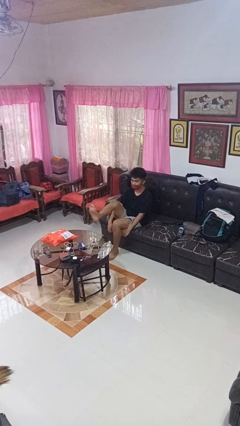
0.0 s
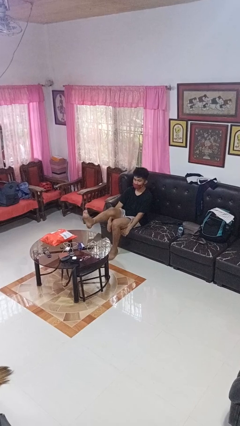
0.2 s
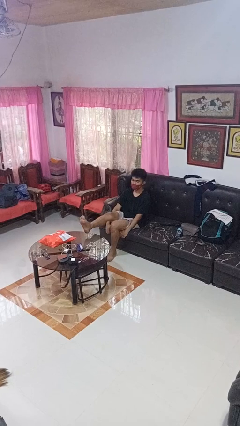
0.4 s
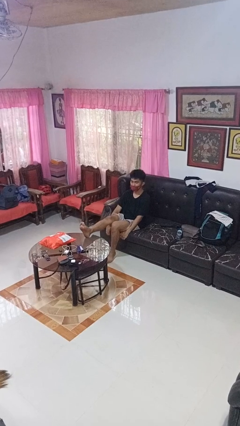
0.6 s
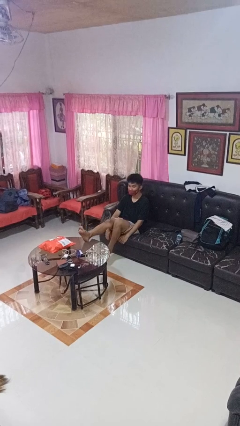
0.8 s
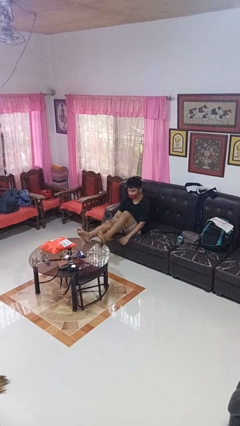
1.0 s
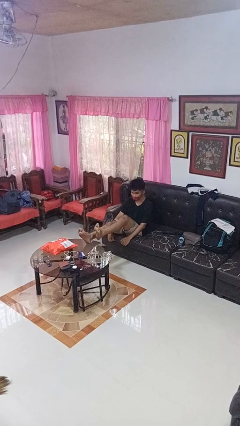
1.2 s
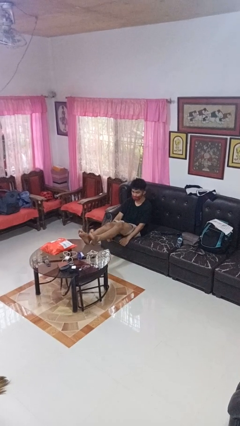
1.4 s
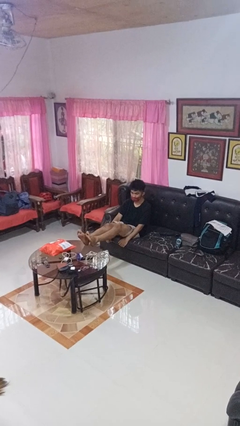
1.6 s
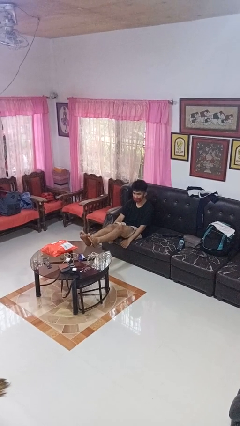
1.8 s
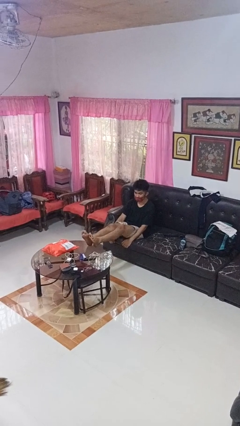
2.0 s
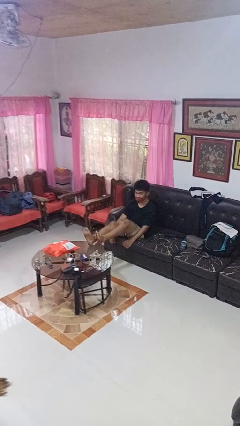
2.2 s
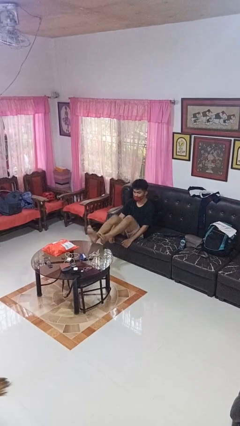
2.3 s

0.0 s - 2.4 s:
person puts feet up

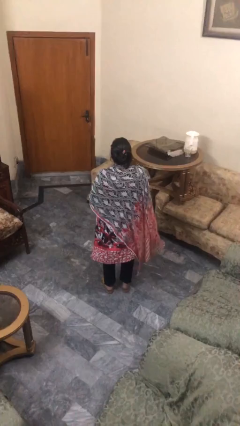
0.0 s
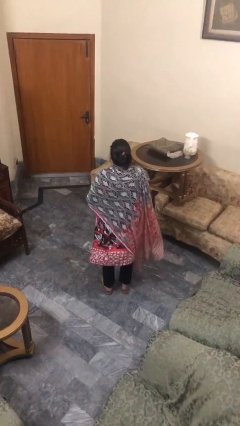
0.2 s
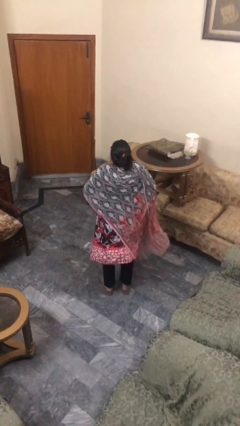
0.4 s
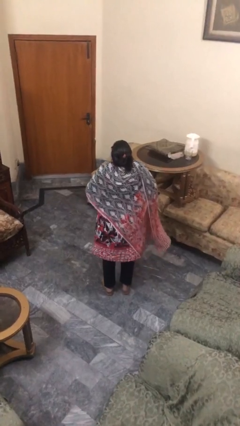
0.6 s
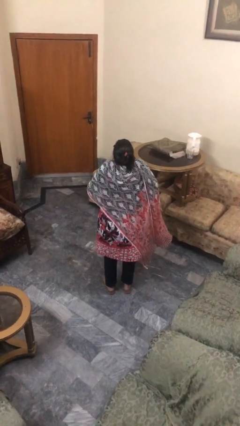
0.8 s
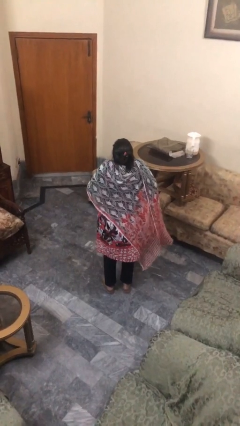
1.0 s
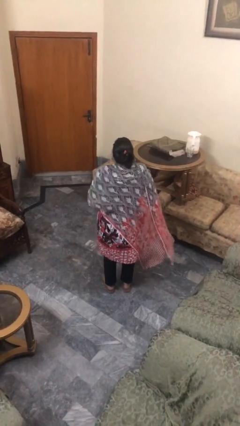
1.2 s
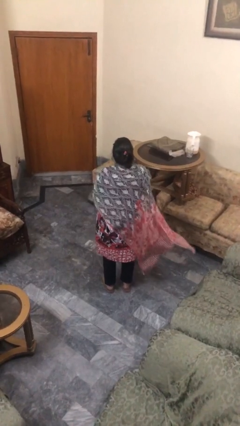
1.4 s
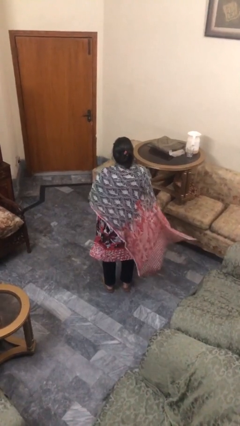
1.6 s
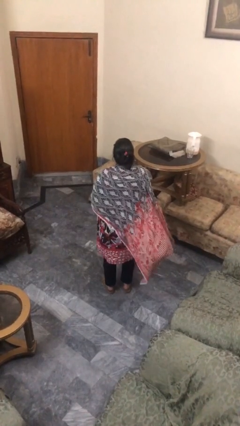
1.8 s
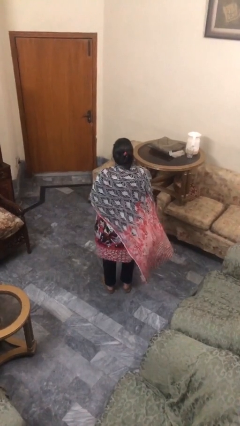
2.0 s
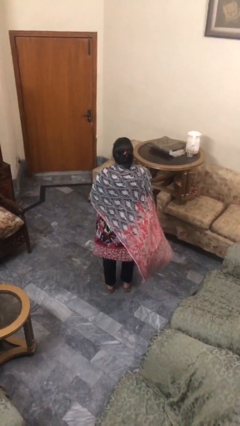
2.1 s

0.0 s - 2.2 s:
person shrugs

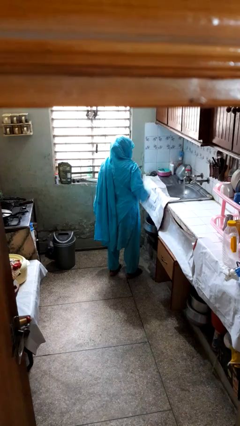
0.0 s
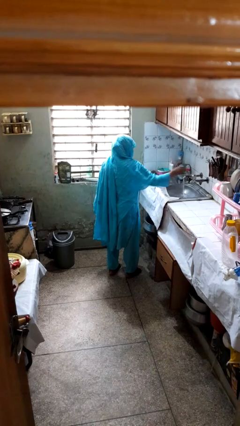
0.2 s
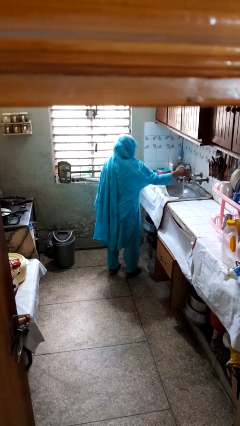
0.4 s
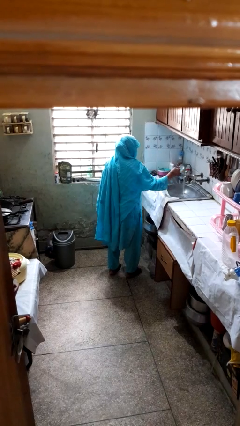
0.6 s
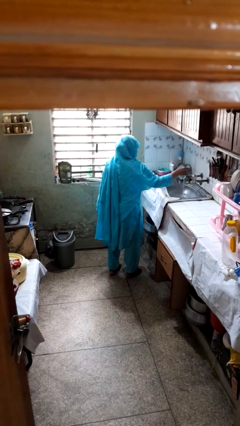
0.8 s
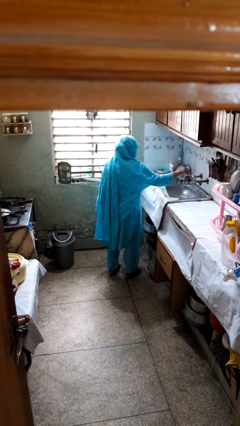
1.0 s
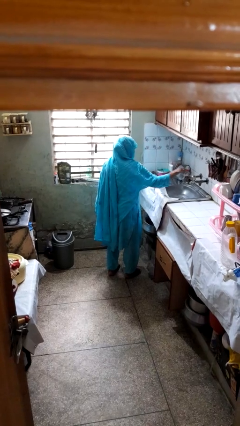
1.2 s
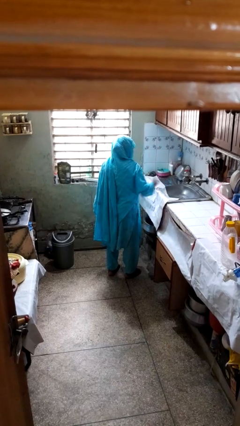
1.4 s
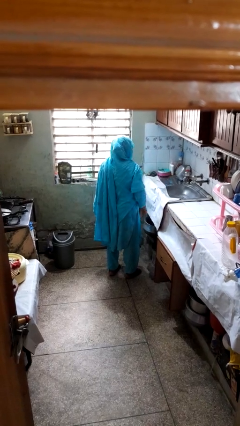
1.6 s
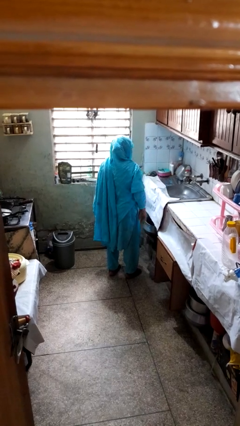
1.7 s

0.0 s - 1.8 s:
person turns off faucet

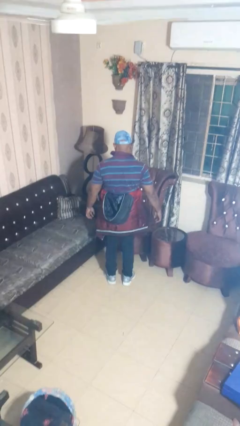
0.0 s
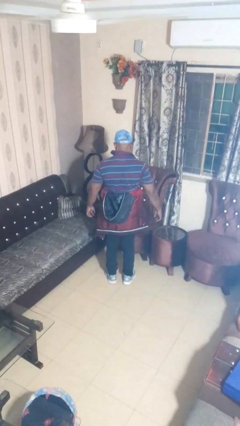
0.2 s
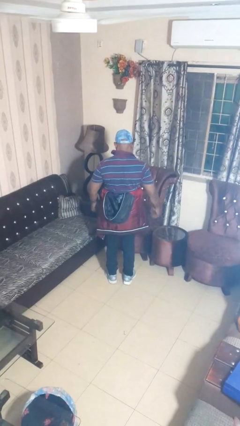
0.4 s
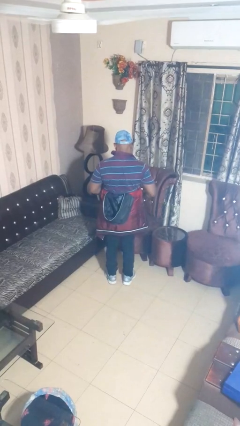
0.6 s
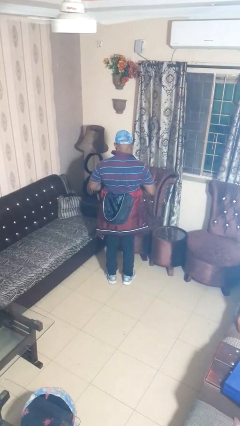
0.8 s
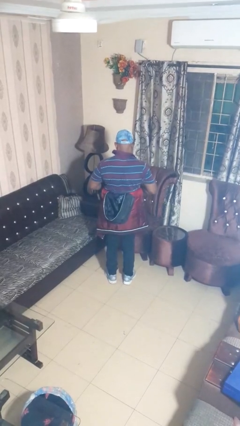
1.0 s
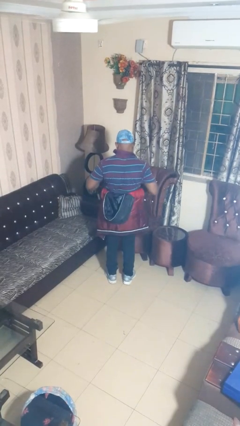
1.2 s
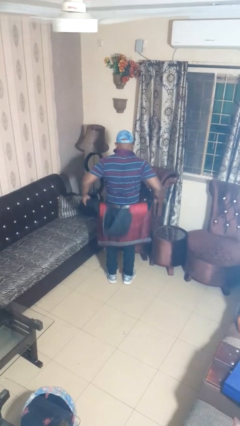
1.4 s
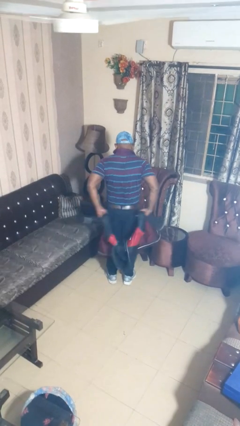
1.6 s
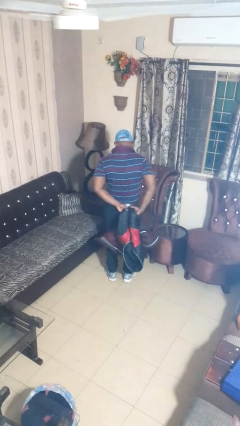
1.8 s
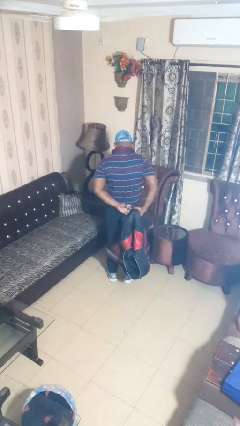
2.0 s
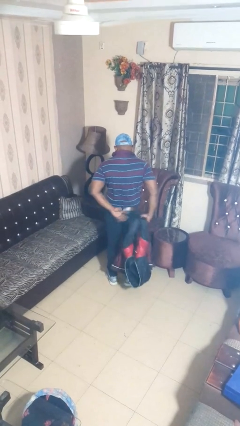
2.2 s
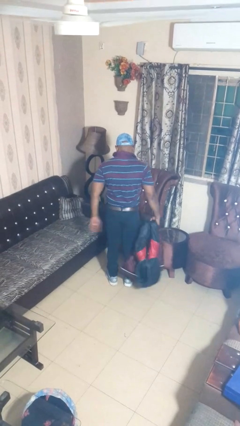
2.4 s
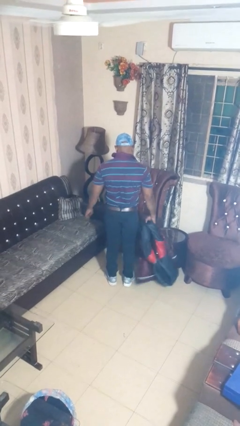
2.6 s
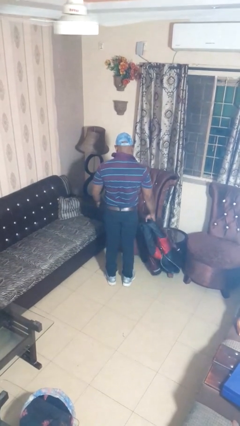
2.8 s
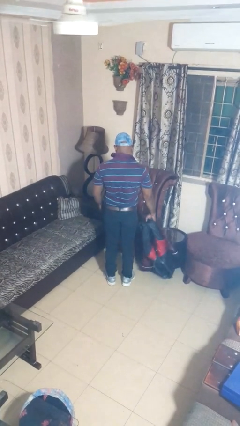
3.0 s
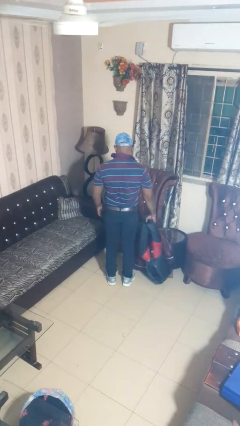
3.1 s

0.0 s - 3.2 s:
person unties jacket around waist

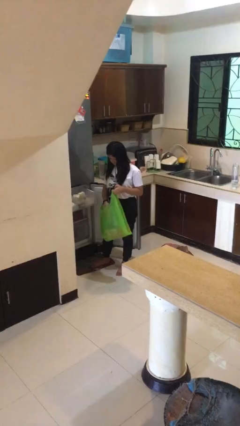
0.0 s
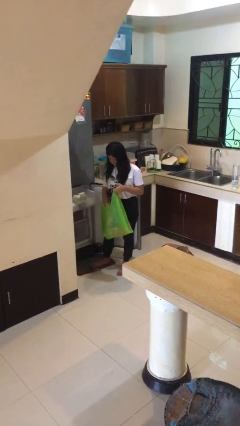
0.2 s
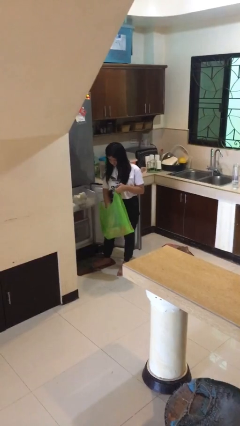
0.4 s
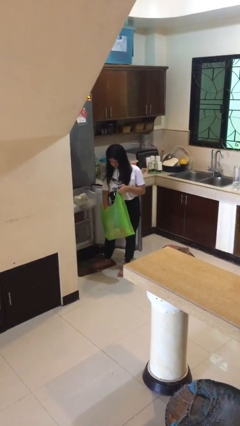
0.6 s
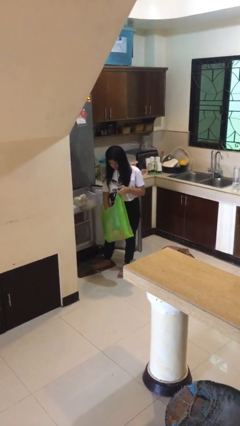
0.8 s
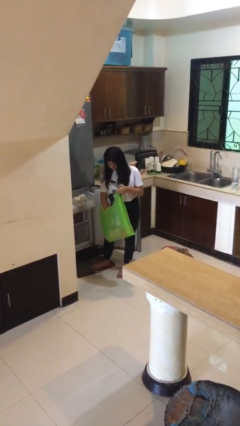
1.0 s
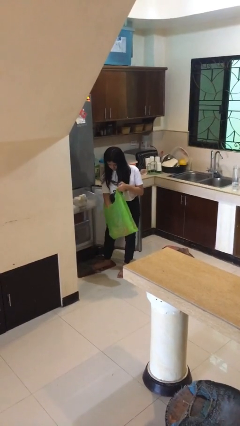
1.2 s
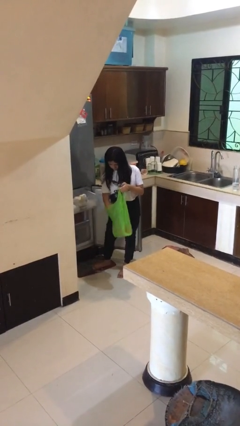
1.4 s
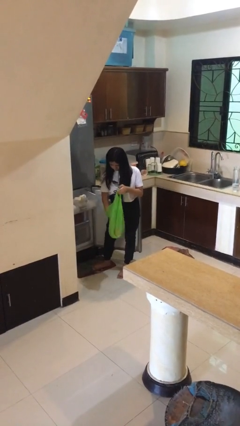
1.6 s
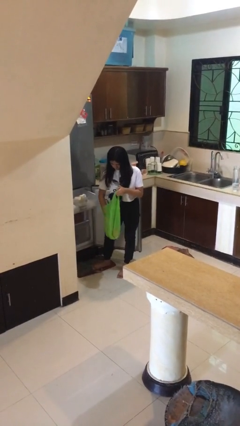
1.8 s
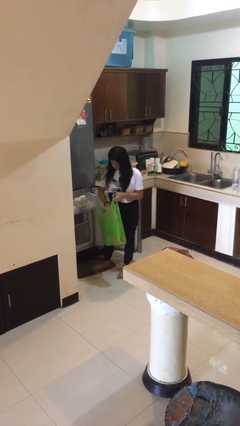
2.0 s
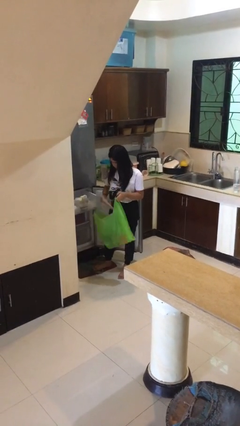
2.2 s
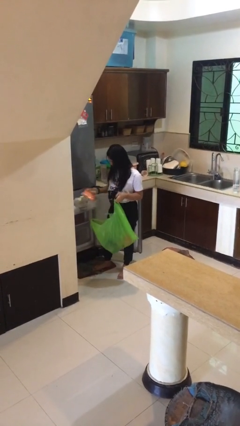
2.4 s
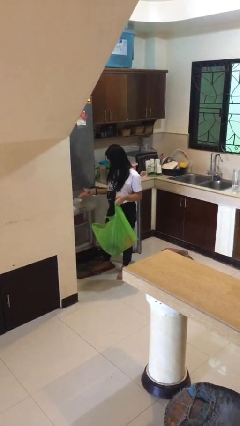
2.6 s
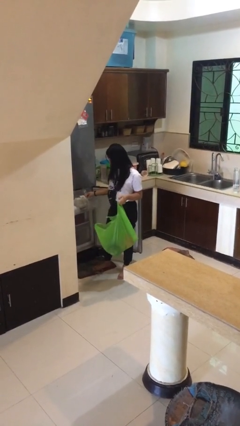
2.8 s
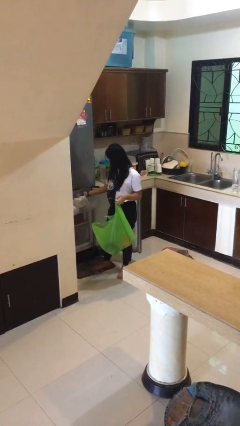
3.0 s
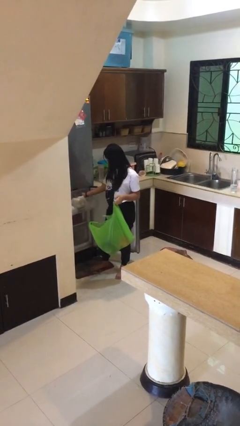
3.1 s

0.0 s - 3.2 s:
person loads groceries into refrigerator

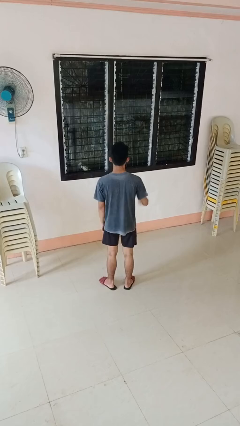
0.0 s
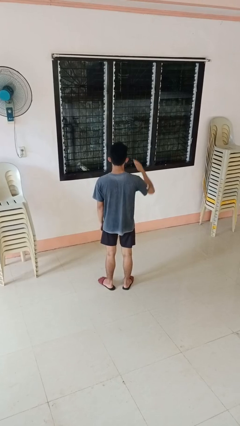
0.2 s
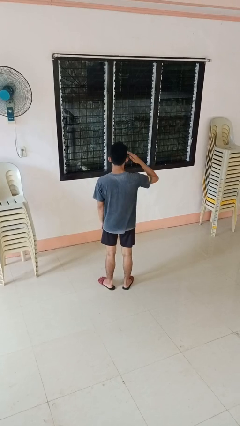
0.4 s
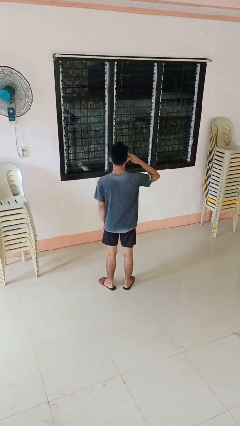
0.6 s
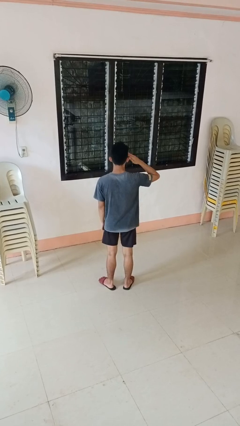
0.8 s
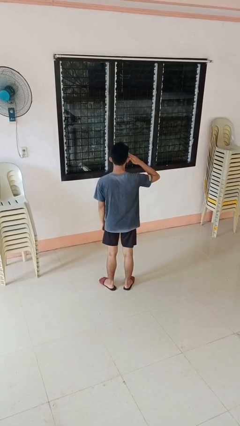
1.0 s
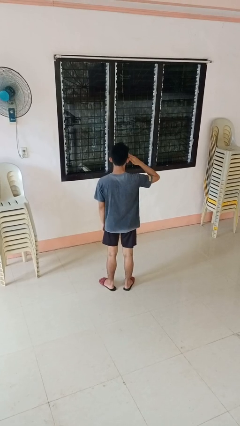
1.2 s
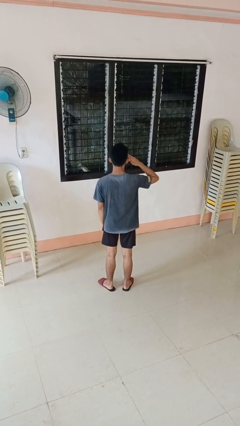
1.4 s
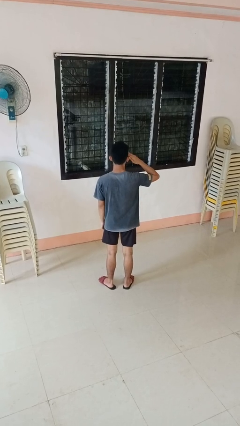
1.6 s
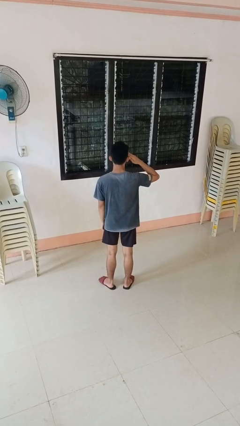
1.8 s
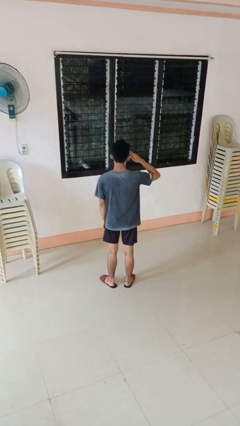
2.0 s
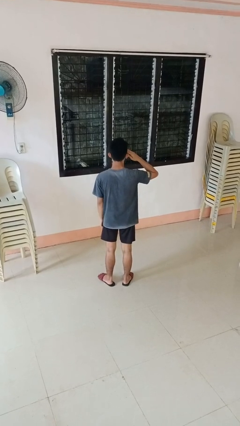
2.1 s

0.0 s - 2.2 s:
person salutes

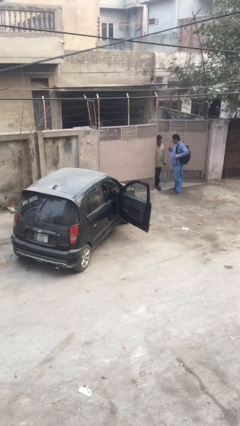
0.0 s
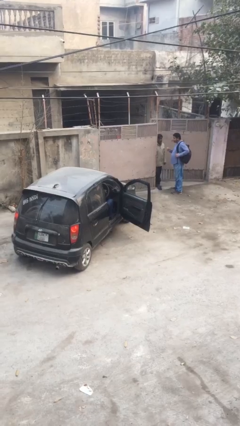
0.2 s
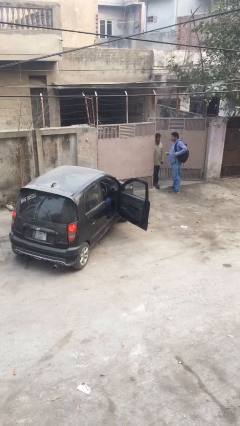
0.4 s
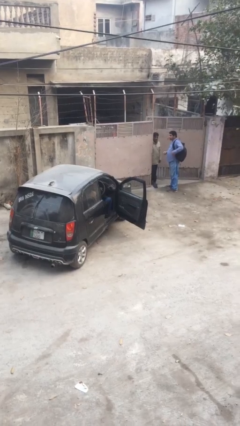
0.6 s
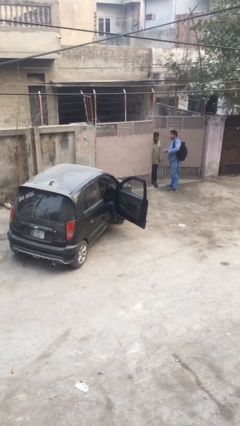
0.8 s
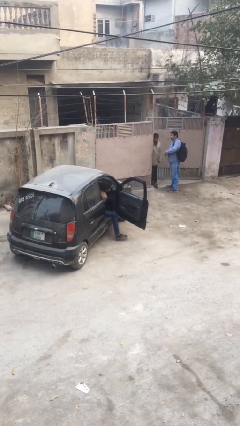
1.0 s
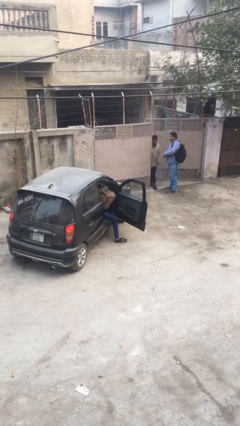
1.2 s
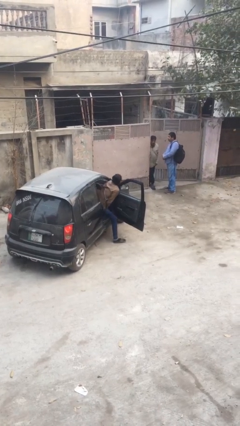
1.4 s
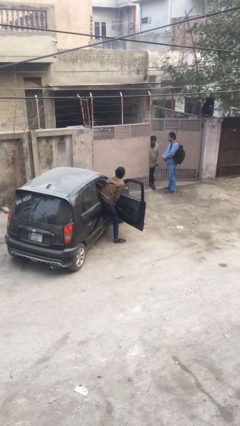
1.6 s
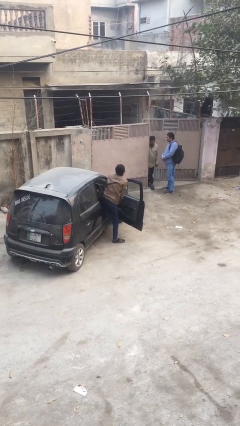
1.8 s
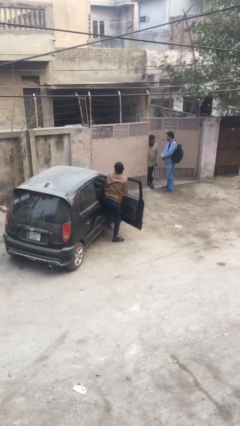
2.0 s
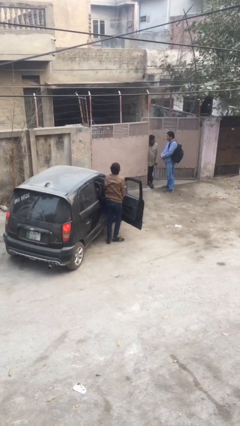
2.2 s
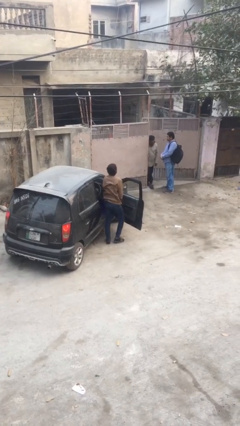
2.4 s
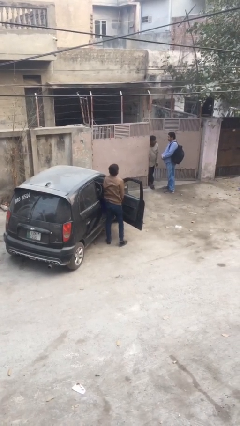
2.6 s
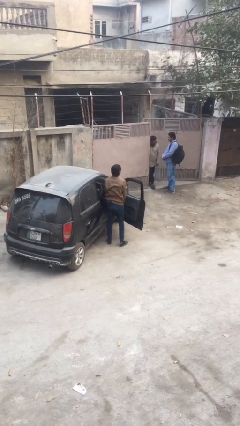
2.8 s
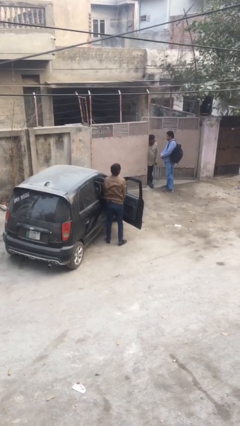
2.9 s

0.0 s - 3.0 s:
person exits car
